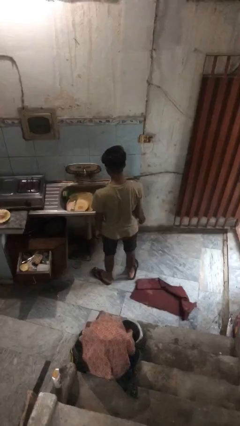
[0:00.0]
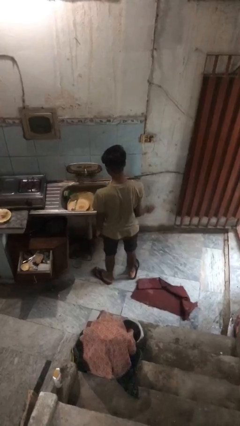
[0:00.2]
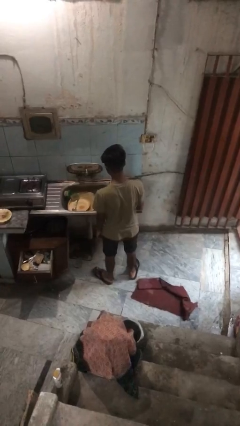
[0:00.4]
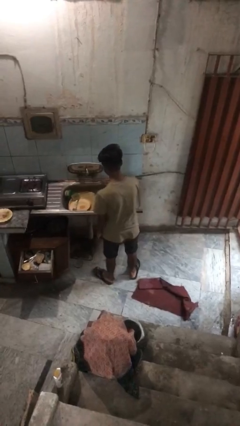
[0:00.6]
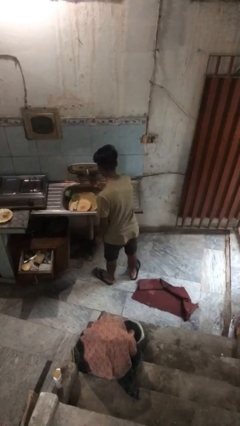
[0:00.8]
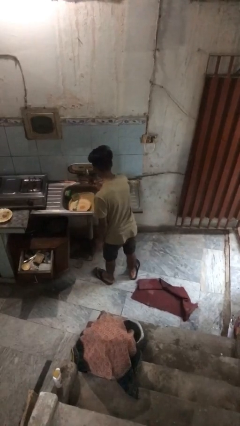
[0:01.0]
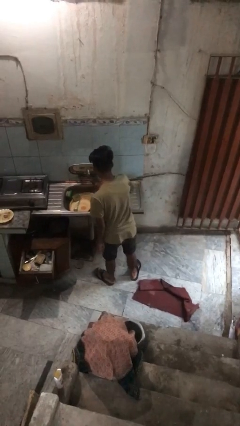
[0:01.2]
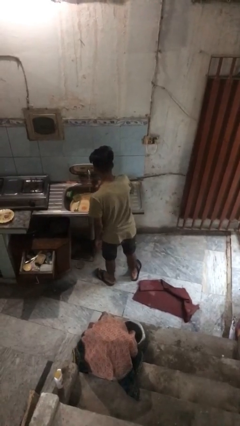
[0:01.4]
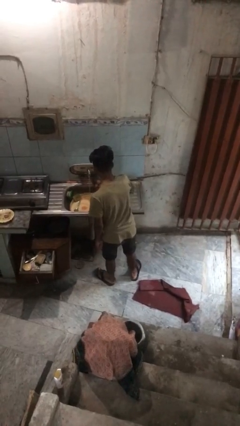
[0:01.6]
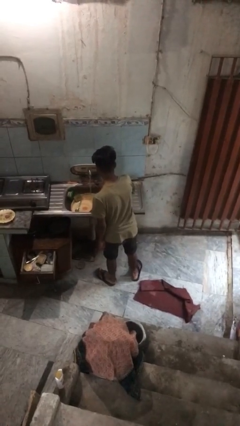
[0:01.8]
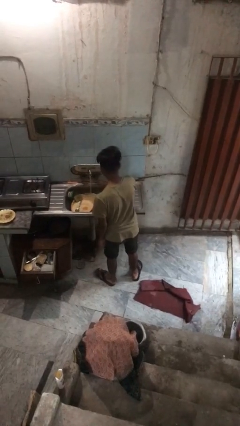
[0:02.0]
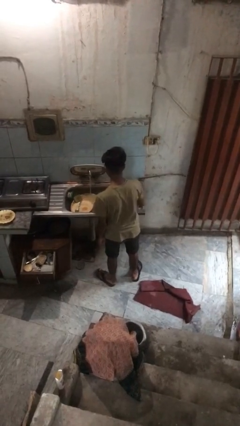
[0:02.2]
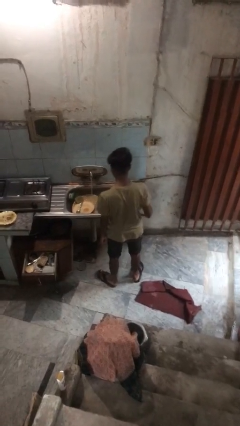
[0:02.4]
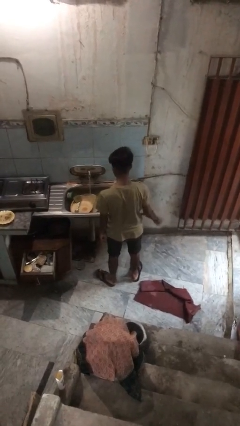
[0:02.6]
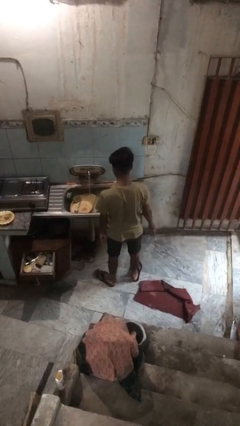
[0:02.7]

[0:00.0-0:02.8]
person turns on faucet

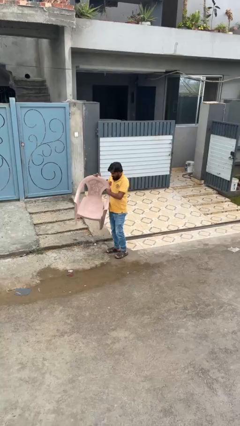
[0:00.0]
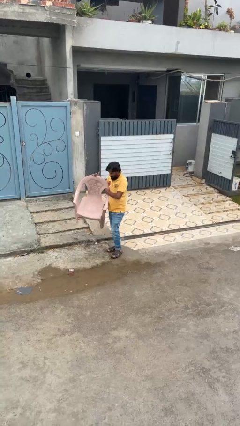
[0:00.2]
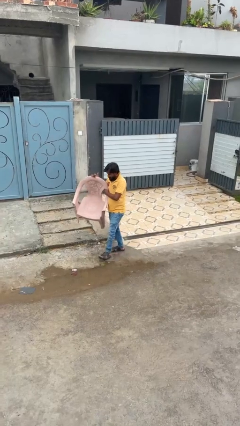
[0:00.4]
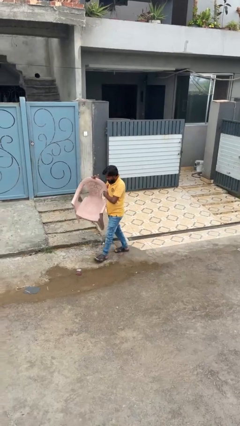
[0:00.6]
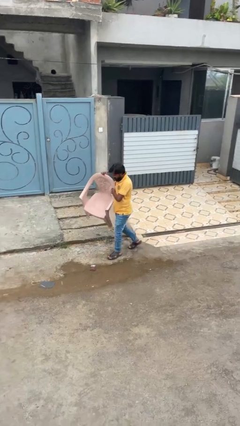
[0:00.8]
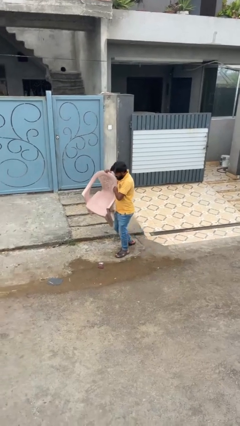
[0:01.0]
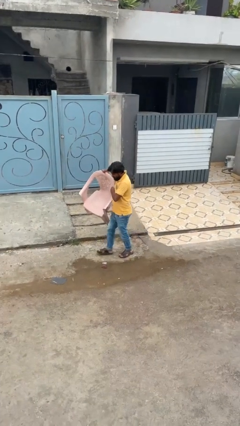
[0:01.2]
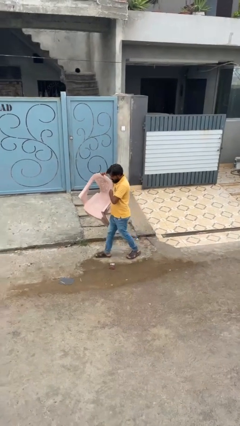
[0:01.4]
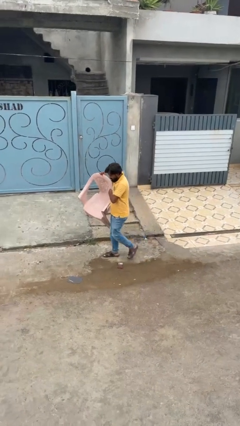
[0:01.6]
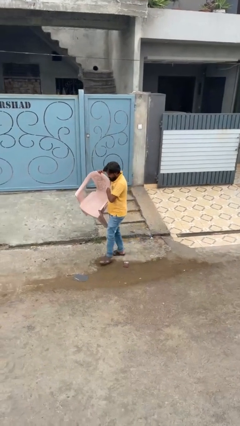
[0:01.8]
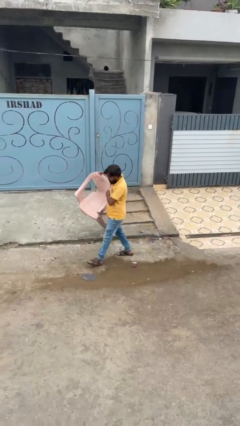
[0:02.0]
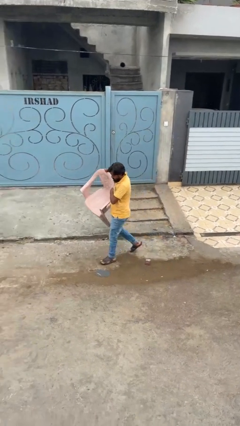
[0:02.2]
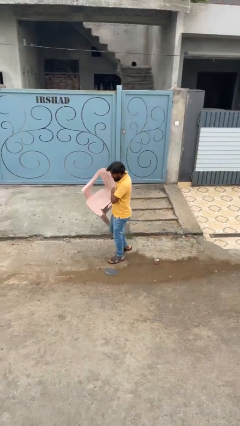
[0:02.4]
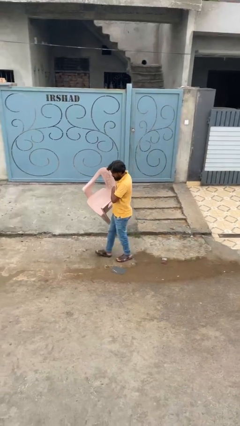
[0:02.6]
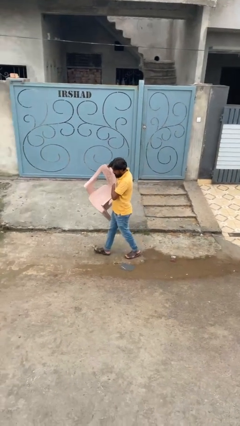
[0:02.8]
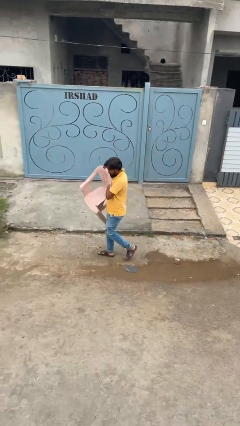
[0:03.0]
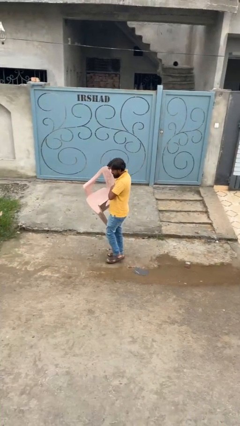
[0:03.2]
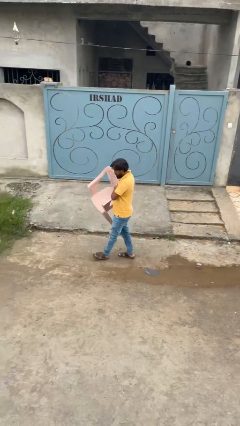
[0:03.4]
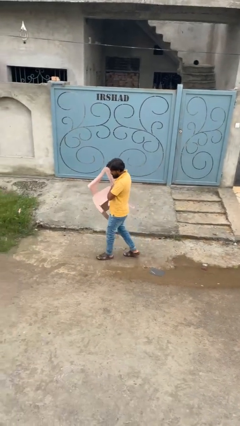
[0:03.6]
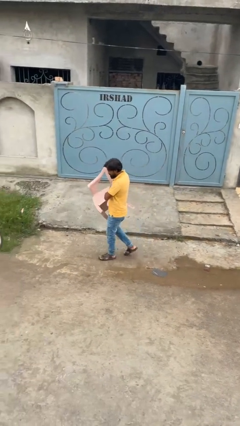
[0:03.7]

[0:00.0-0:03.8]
person carries furniture

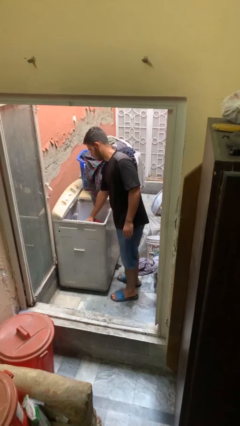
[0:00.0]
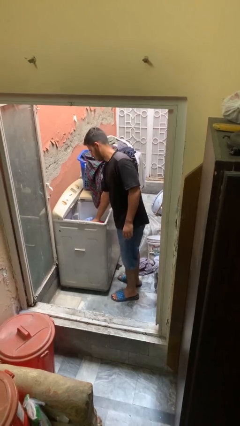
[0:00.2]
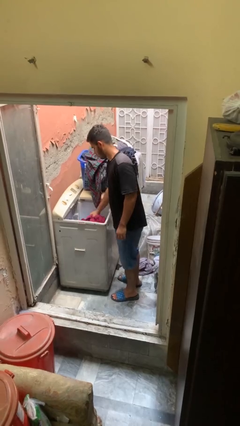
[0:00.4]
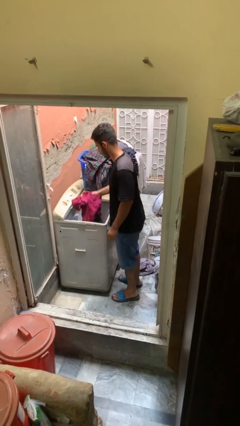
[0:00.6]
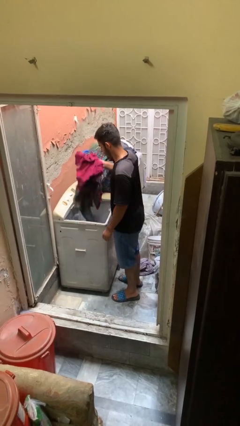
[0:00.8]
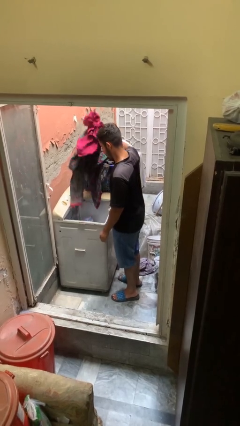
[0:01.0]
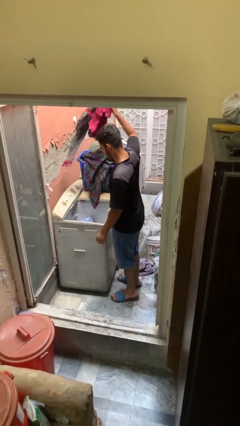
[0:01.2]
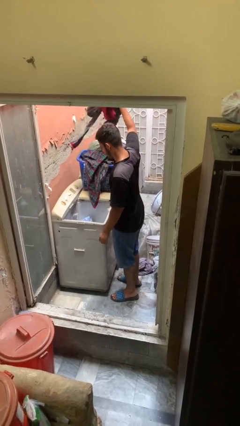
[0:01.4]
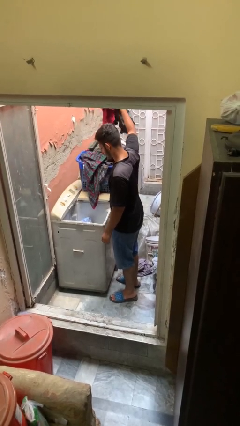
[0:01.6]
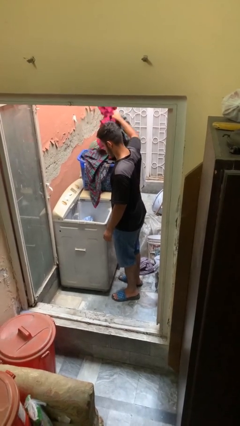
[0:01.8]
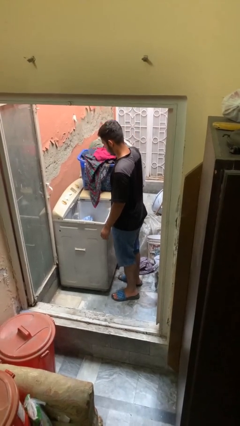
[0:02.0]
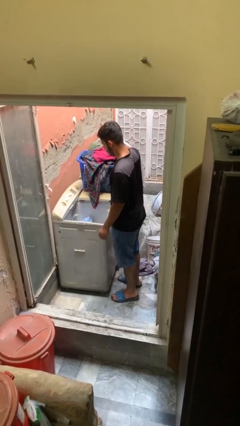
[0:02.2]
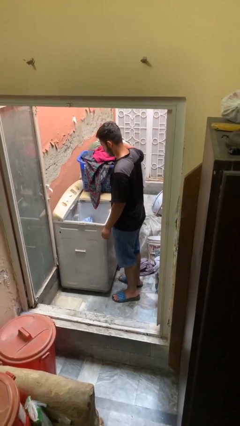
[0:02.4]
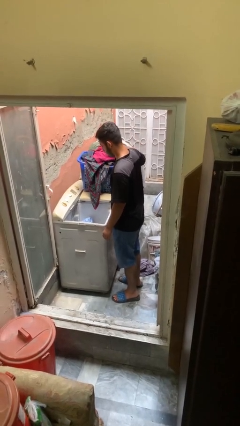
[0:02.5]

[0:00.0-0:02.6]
person loads clotheswasher

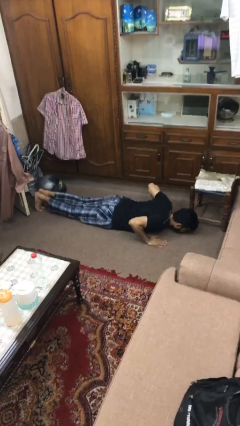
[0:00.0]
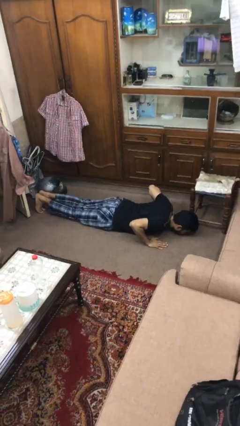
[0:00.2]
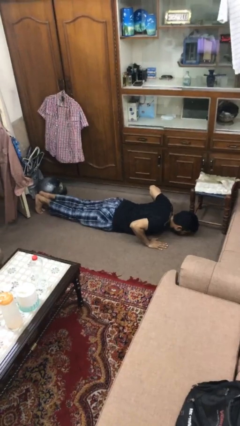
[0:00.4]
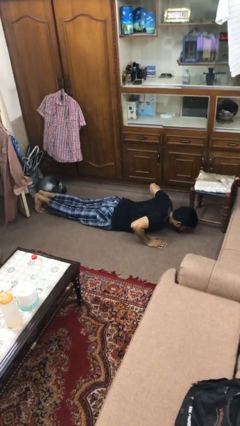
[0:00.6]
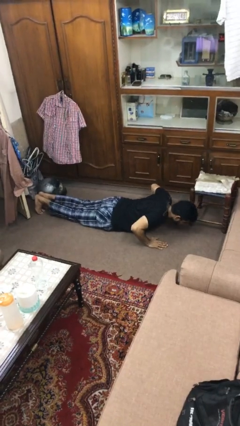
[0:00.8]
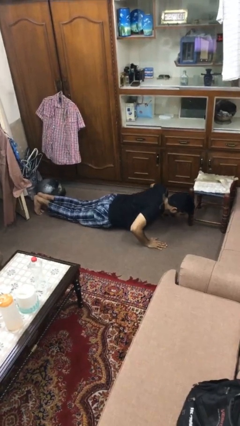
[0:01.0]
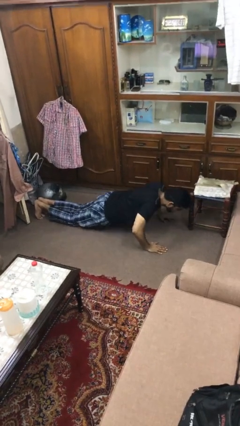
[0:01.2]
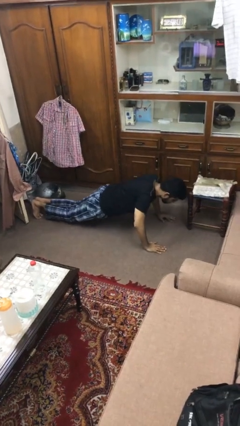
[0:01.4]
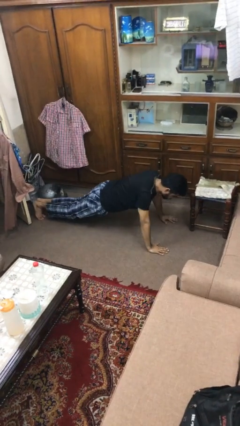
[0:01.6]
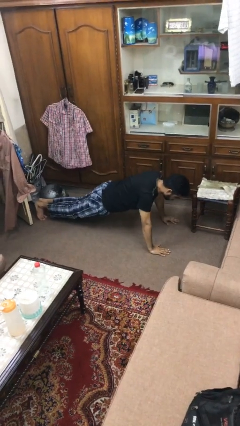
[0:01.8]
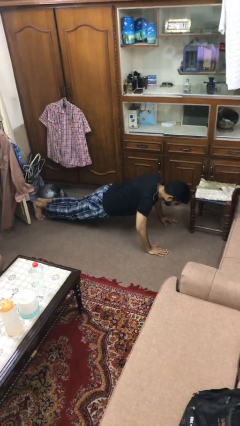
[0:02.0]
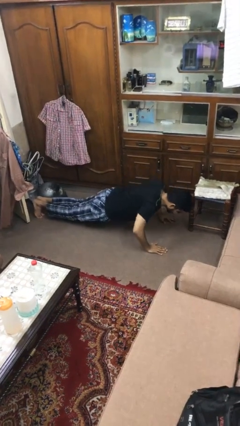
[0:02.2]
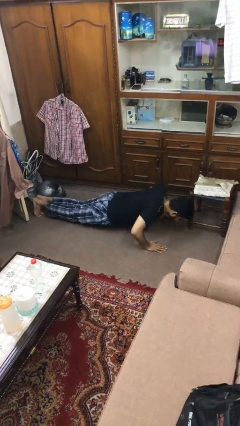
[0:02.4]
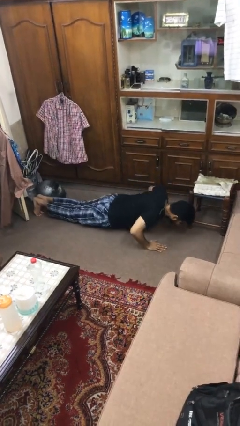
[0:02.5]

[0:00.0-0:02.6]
person exercises with pushup

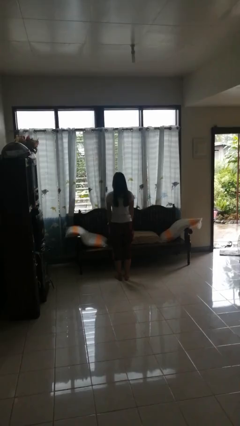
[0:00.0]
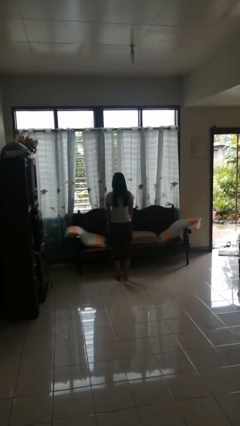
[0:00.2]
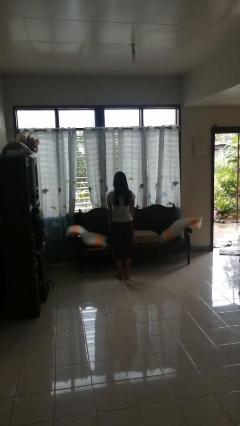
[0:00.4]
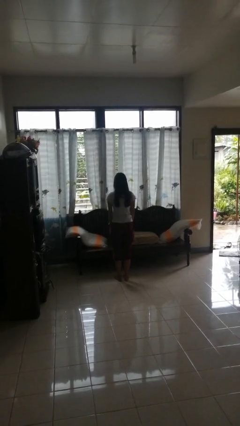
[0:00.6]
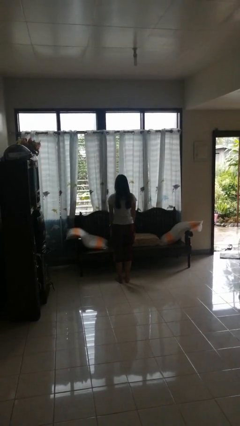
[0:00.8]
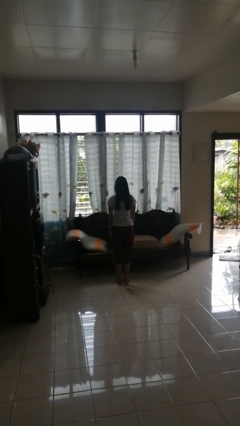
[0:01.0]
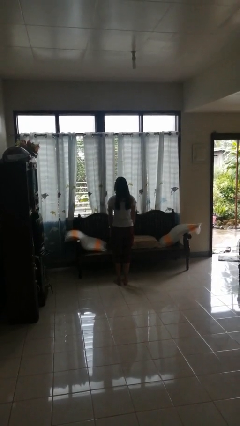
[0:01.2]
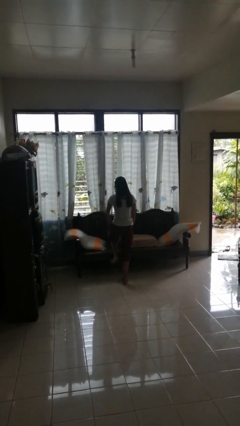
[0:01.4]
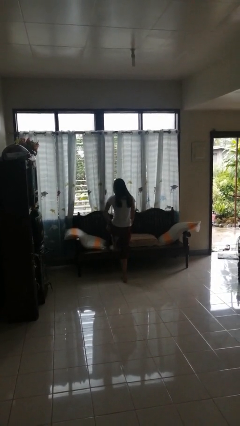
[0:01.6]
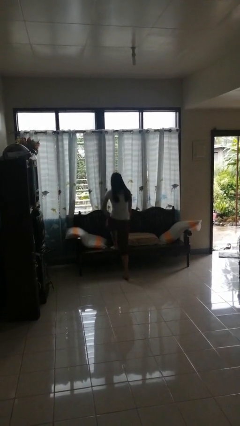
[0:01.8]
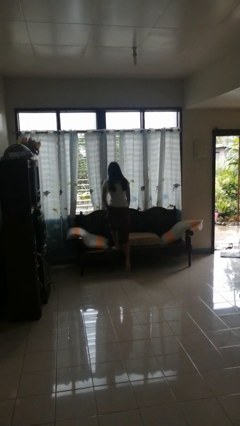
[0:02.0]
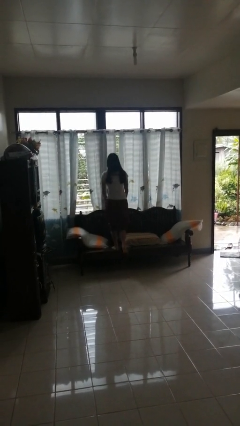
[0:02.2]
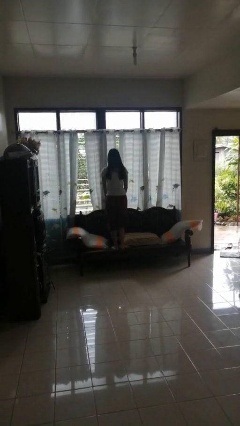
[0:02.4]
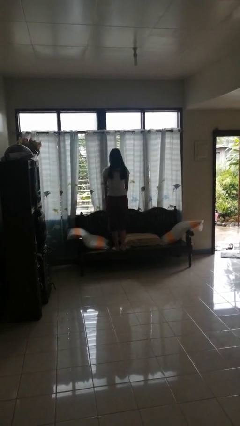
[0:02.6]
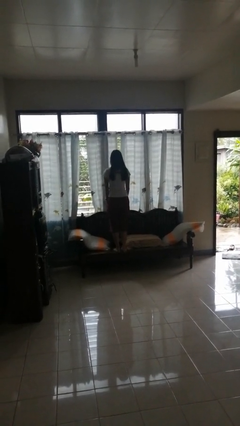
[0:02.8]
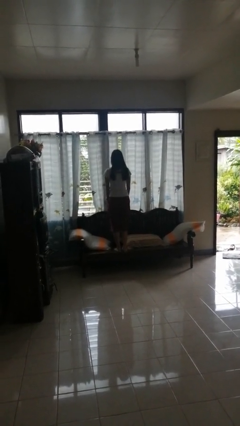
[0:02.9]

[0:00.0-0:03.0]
person climbs on couch

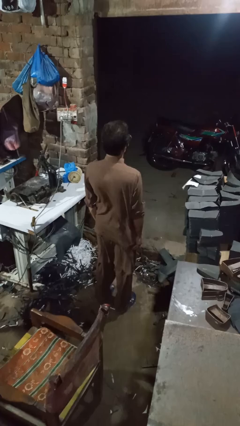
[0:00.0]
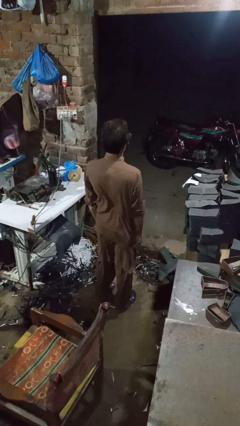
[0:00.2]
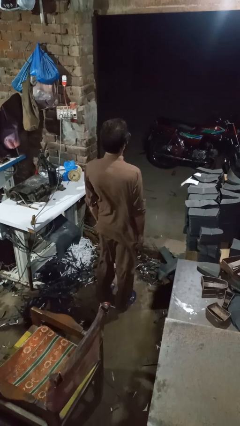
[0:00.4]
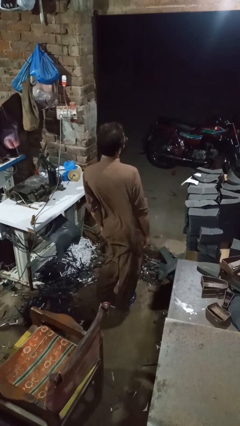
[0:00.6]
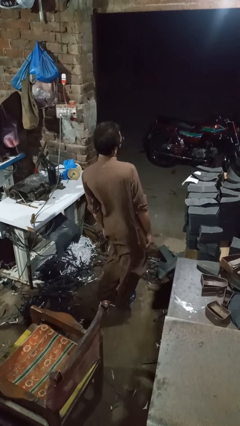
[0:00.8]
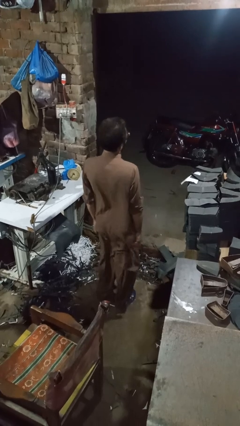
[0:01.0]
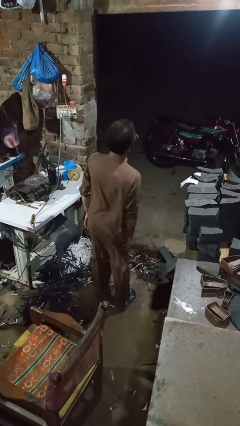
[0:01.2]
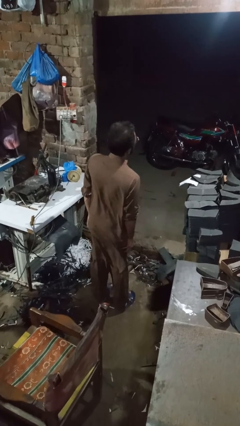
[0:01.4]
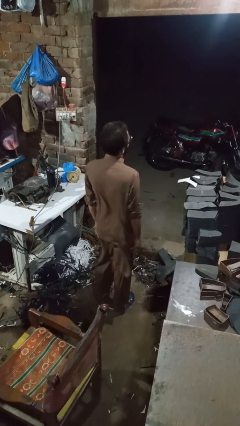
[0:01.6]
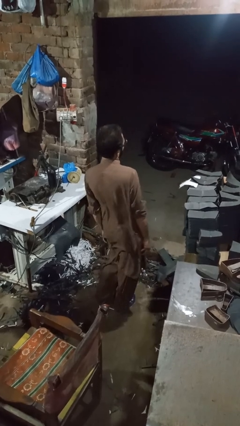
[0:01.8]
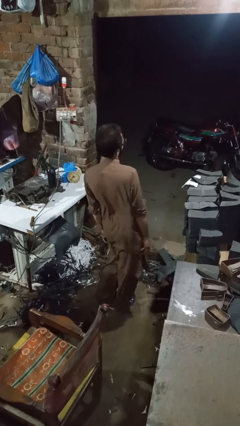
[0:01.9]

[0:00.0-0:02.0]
person wiggles hips
